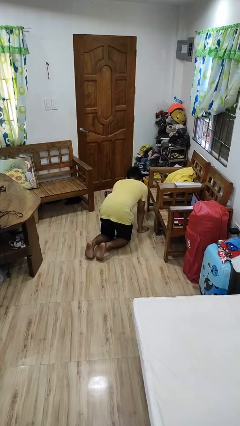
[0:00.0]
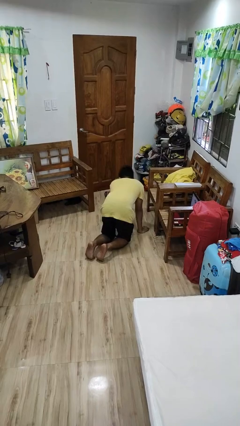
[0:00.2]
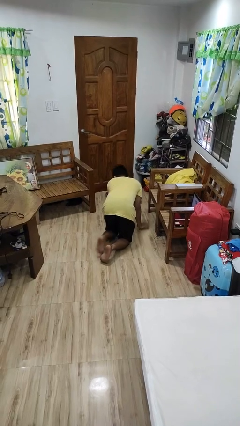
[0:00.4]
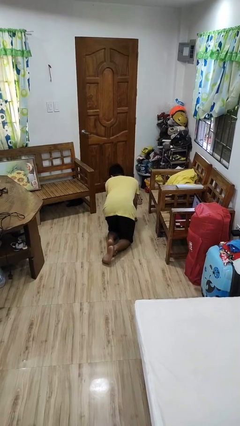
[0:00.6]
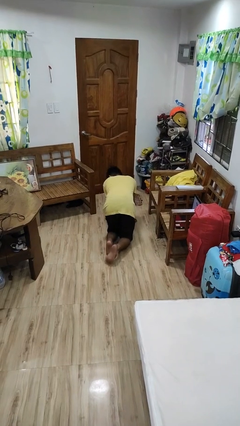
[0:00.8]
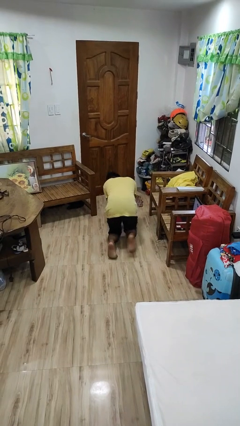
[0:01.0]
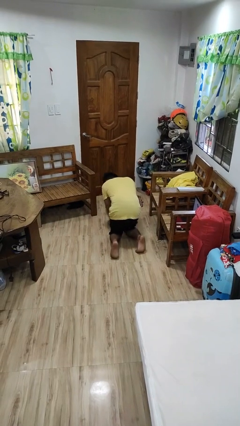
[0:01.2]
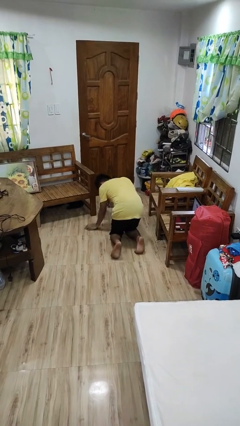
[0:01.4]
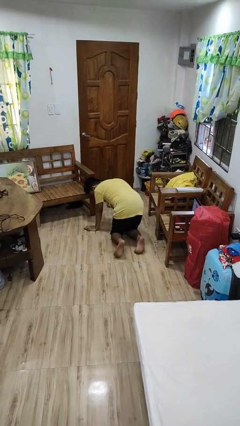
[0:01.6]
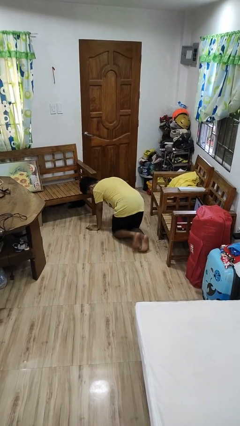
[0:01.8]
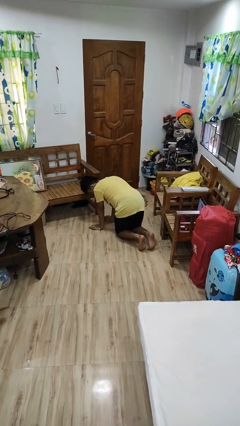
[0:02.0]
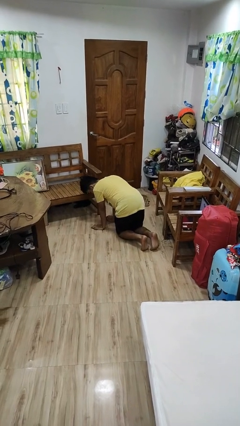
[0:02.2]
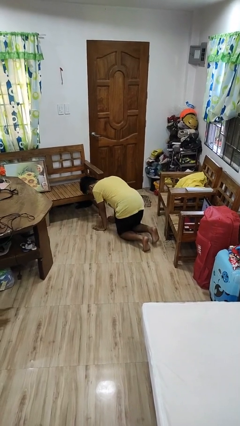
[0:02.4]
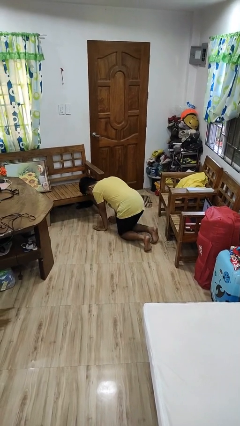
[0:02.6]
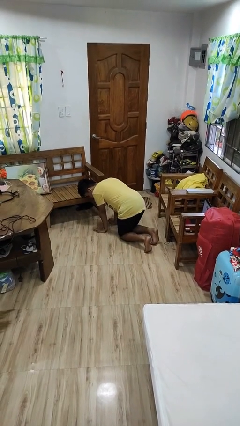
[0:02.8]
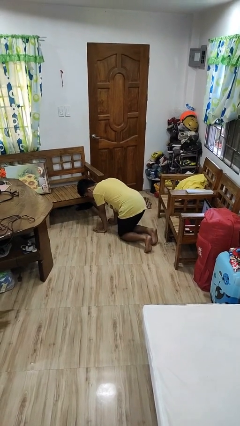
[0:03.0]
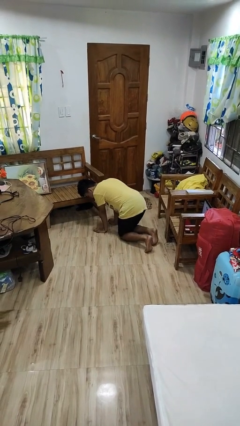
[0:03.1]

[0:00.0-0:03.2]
person crawls

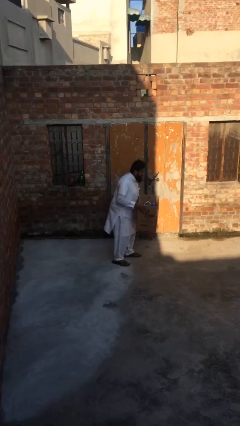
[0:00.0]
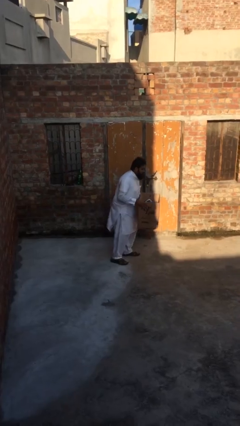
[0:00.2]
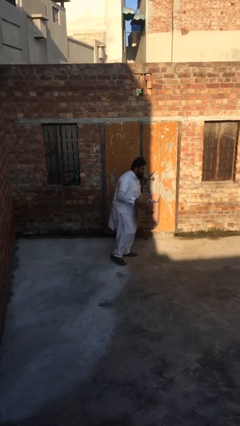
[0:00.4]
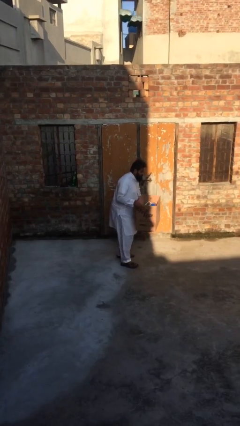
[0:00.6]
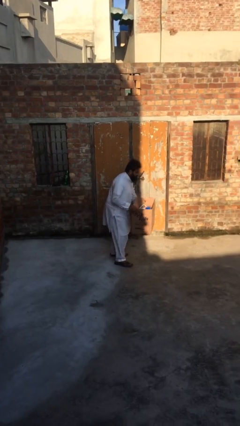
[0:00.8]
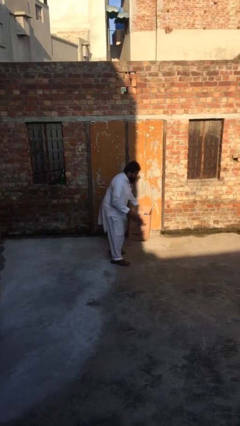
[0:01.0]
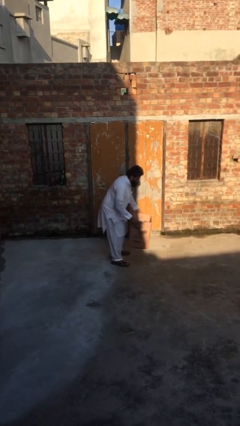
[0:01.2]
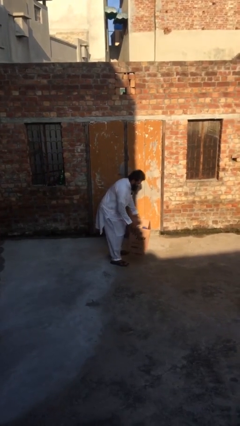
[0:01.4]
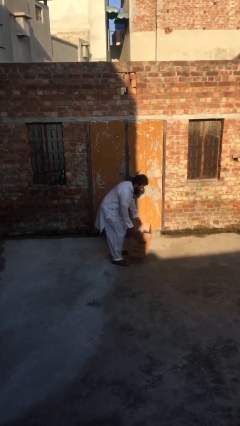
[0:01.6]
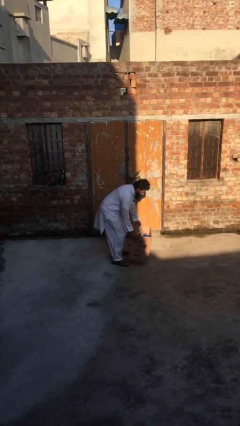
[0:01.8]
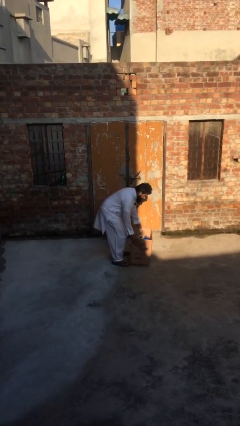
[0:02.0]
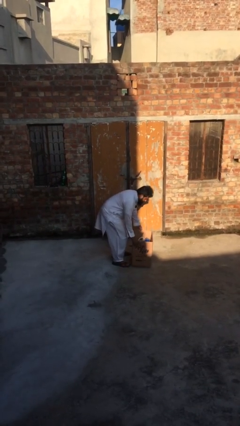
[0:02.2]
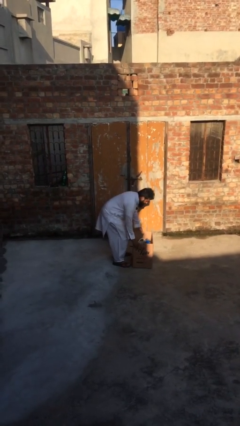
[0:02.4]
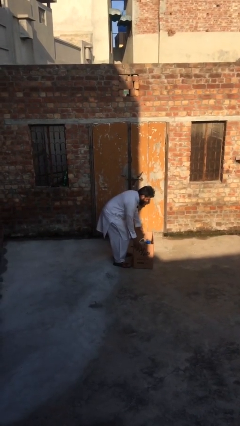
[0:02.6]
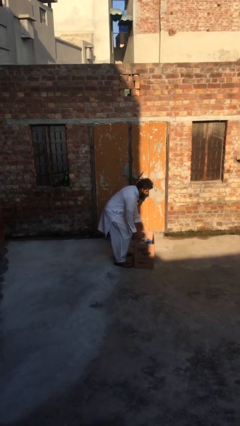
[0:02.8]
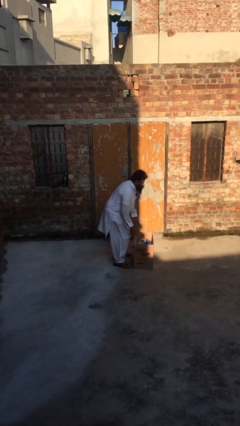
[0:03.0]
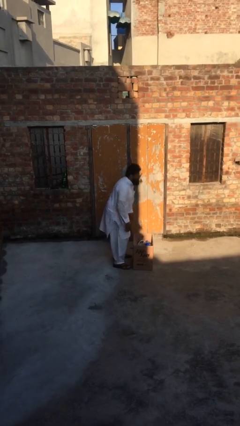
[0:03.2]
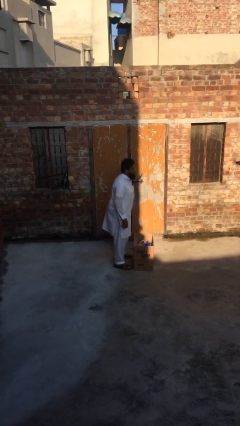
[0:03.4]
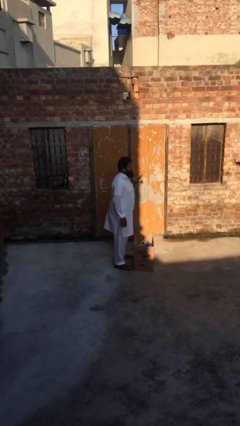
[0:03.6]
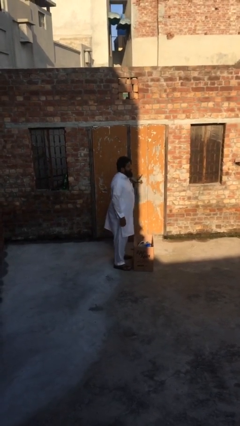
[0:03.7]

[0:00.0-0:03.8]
person puts down object on floor

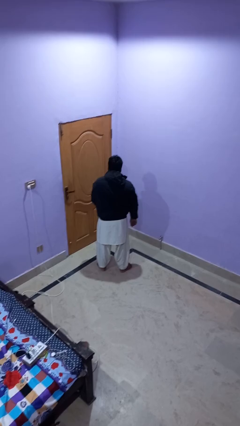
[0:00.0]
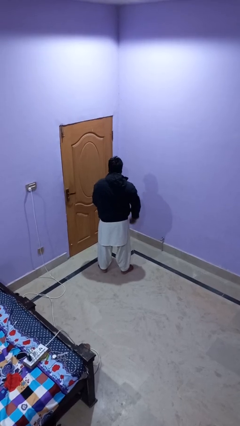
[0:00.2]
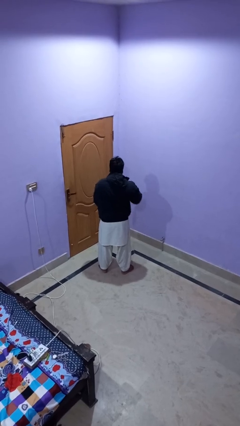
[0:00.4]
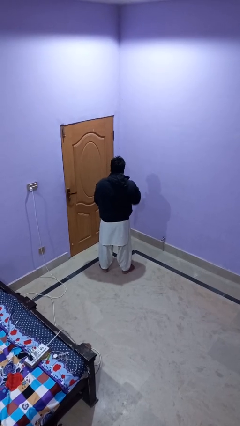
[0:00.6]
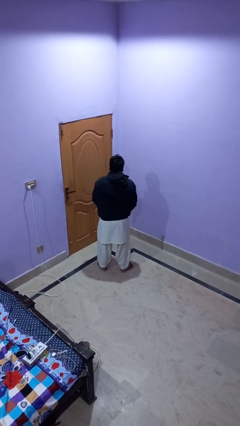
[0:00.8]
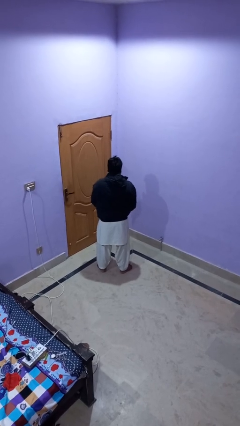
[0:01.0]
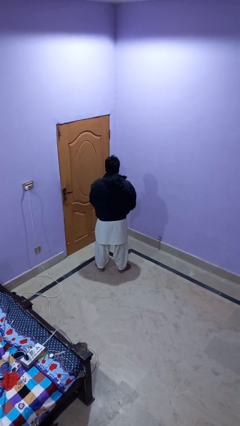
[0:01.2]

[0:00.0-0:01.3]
person unzips jacket

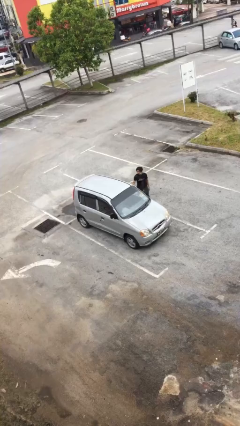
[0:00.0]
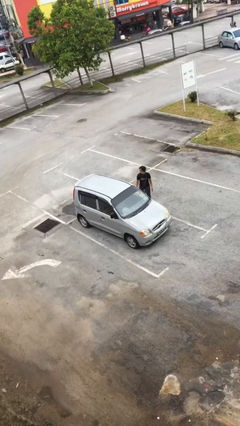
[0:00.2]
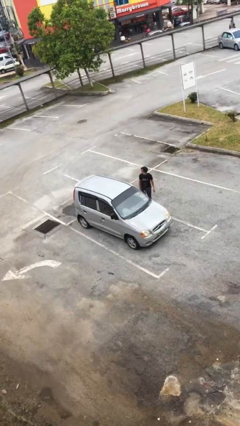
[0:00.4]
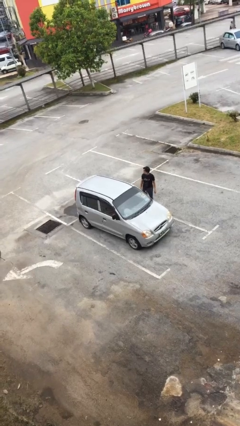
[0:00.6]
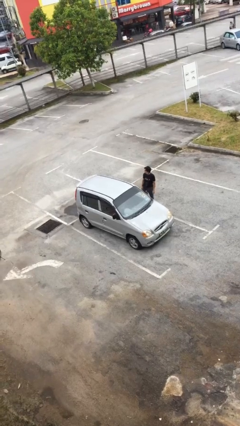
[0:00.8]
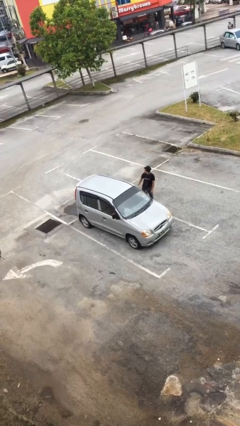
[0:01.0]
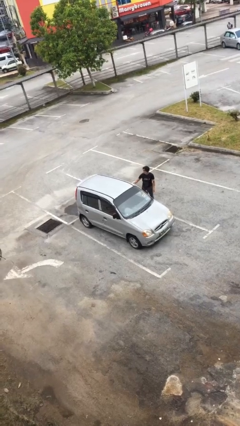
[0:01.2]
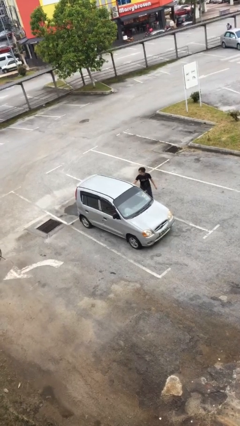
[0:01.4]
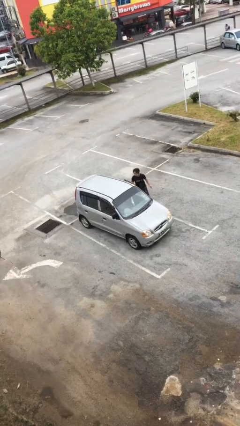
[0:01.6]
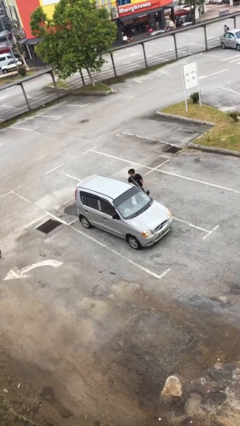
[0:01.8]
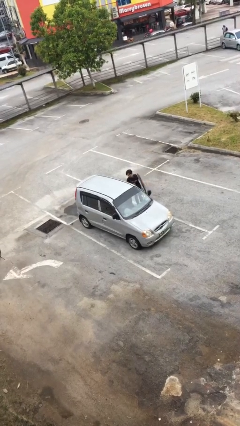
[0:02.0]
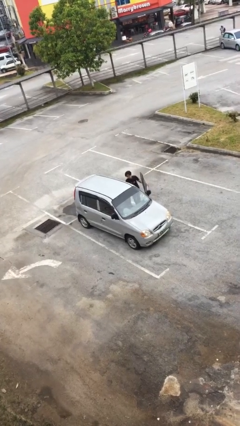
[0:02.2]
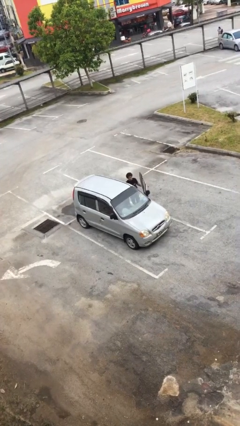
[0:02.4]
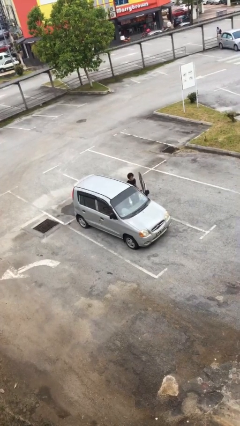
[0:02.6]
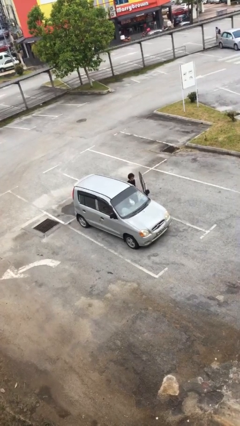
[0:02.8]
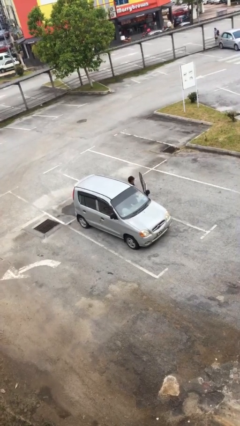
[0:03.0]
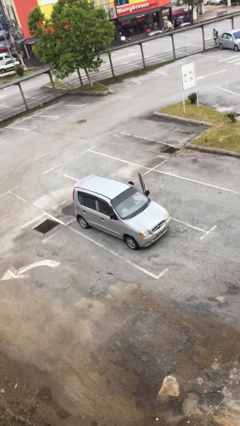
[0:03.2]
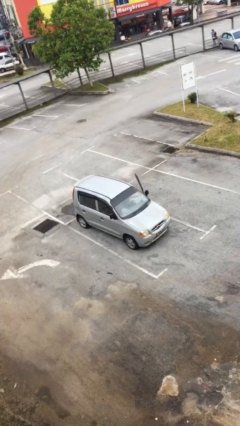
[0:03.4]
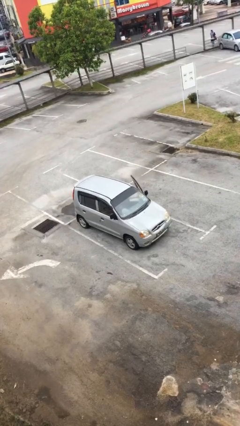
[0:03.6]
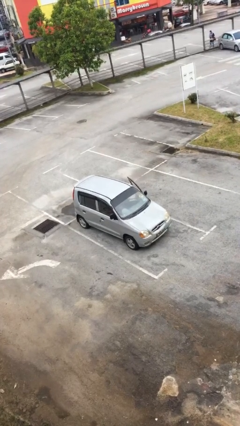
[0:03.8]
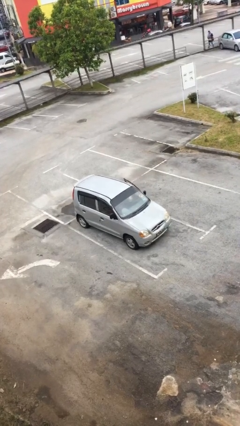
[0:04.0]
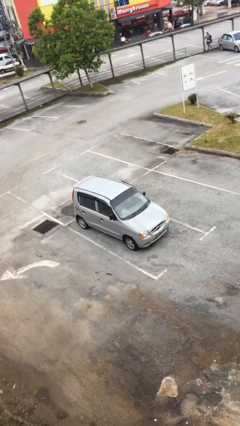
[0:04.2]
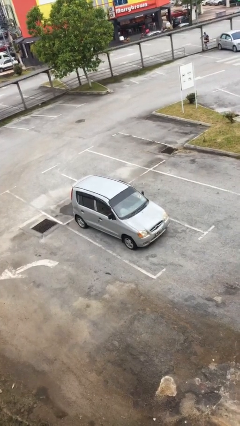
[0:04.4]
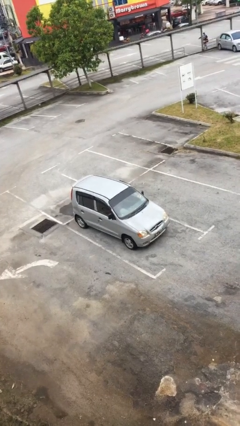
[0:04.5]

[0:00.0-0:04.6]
car picks up person

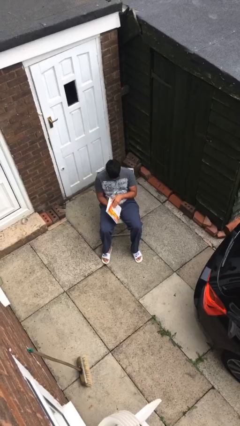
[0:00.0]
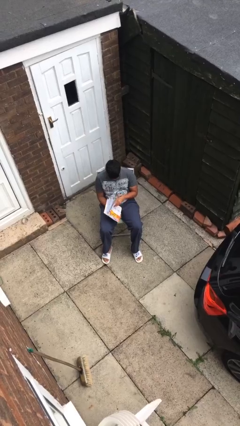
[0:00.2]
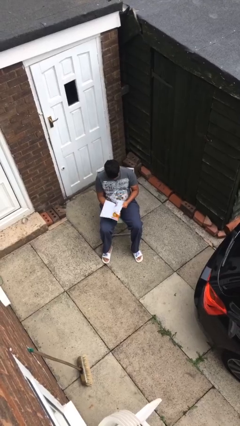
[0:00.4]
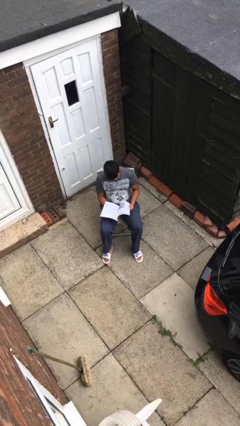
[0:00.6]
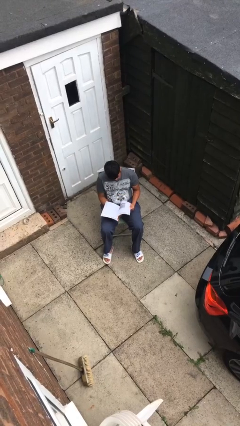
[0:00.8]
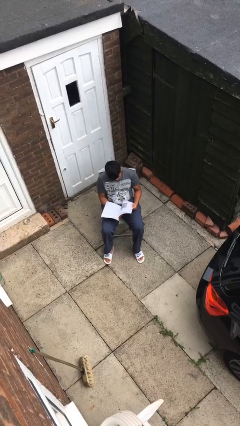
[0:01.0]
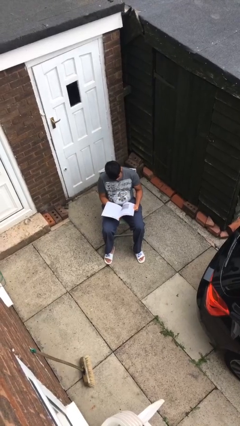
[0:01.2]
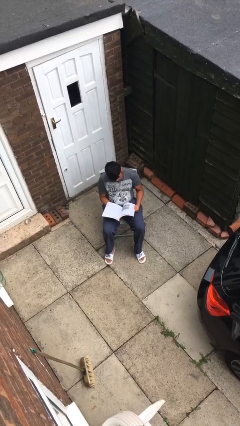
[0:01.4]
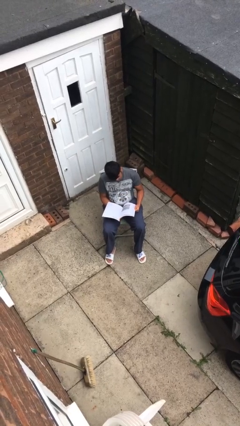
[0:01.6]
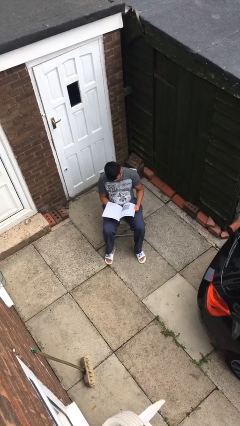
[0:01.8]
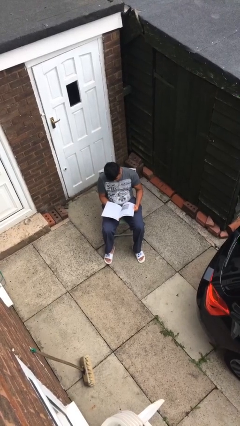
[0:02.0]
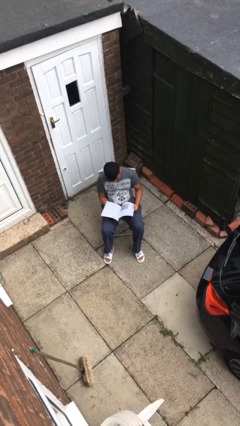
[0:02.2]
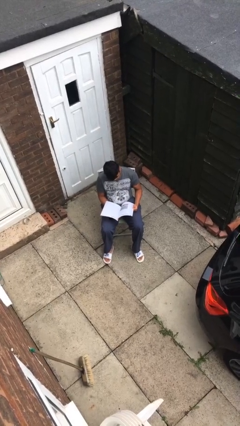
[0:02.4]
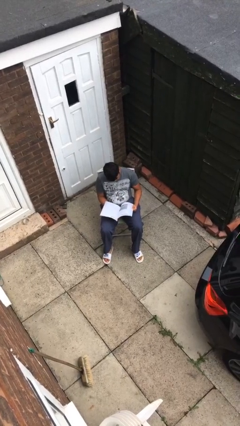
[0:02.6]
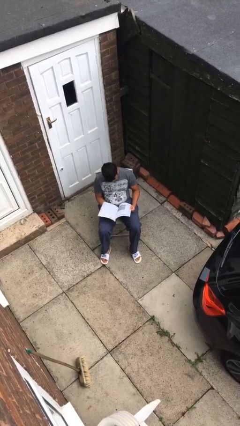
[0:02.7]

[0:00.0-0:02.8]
person reads magazine

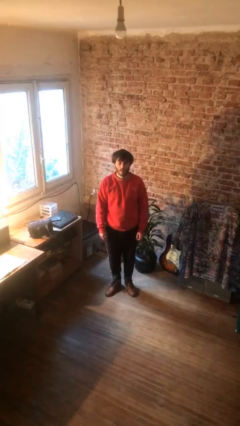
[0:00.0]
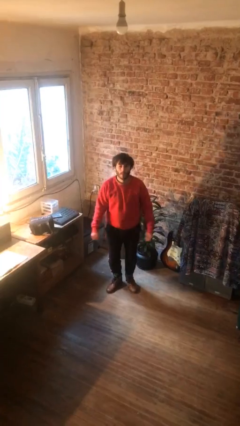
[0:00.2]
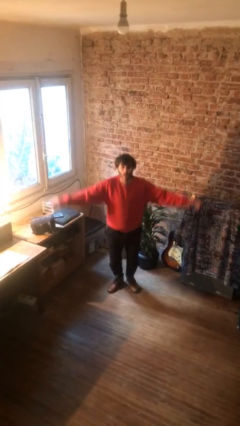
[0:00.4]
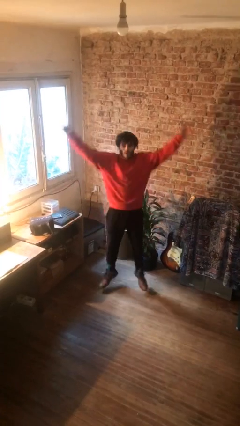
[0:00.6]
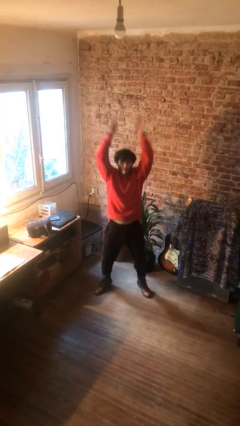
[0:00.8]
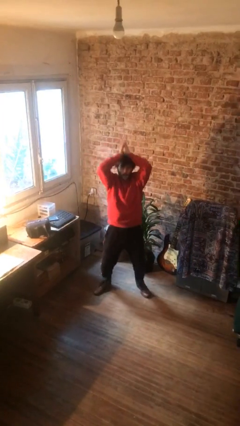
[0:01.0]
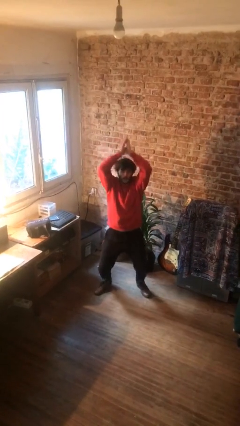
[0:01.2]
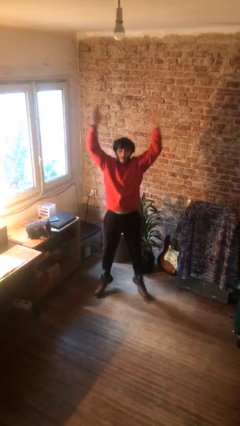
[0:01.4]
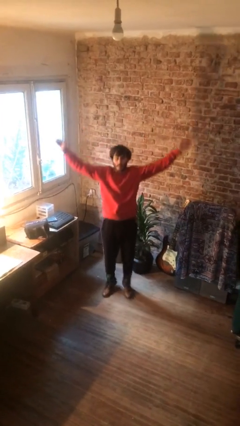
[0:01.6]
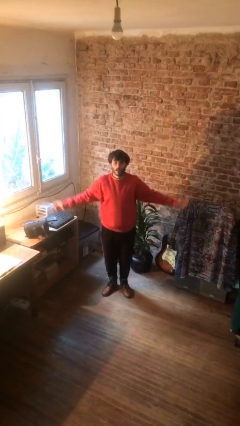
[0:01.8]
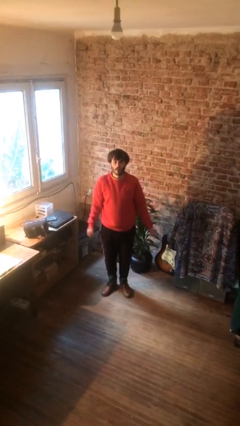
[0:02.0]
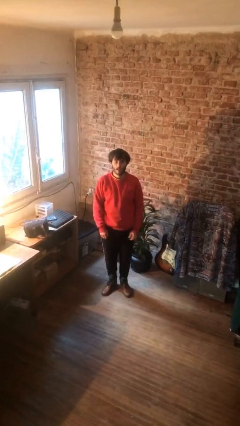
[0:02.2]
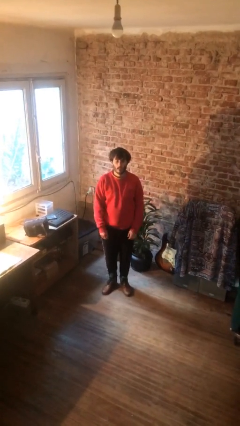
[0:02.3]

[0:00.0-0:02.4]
person exercises with jumping jacks
